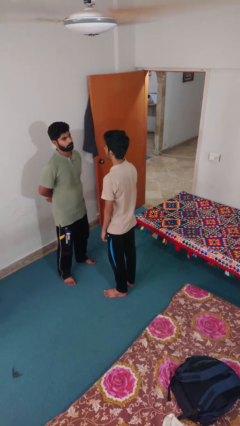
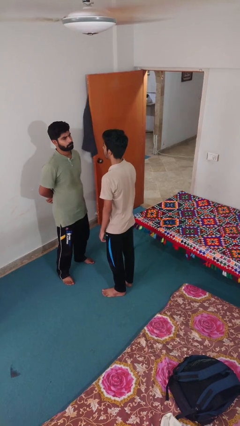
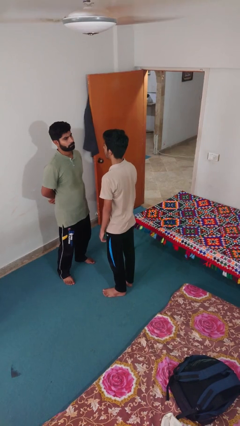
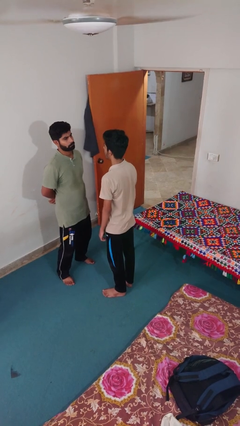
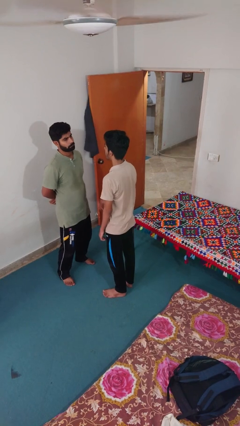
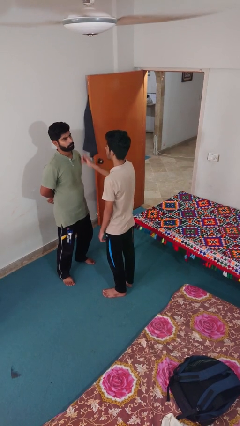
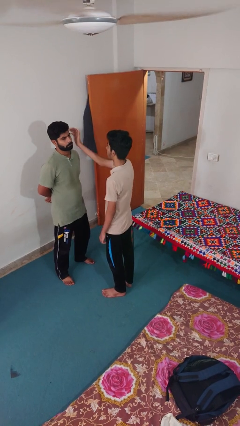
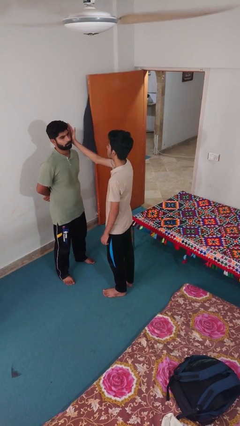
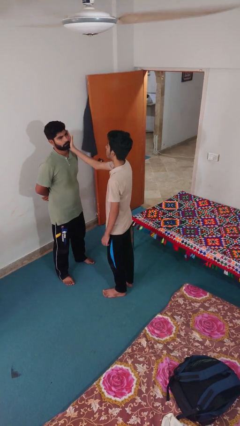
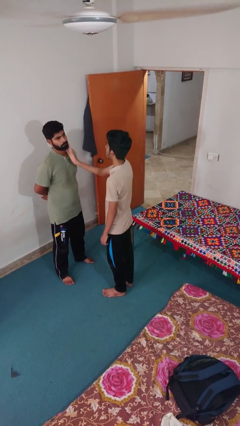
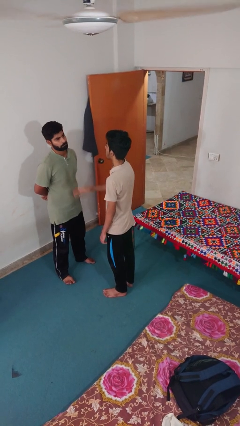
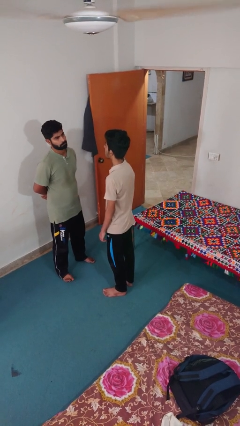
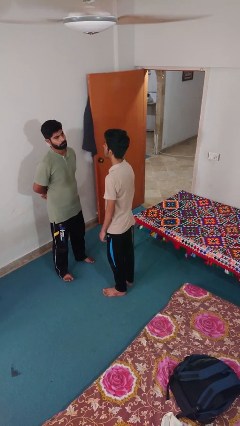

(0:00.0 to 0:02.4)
person touches face of person

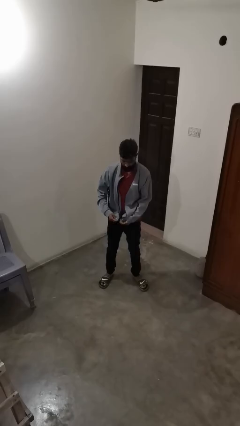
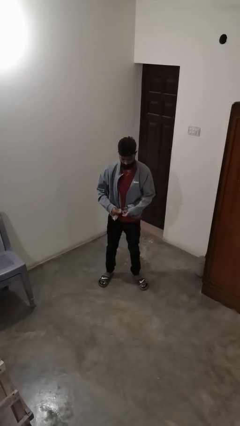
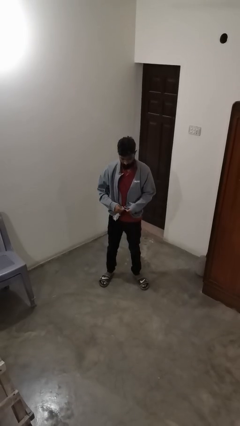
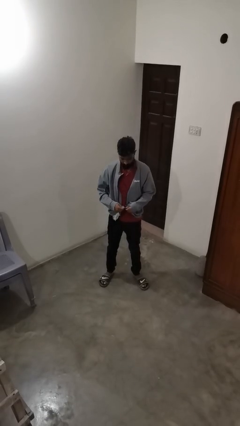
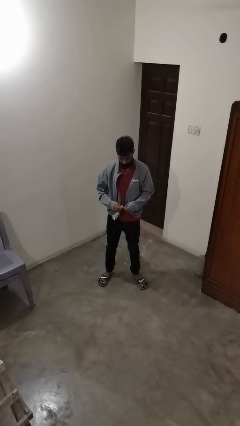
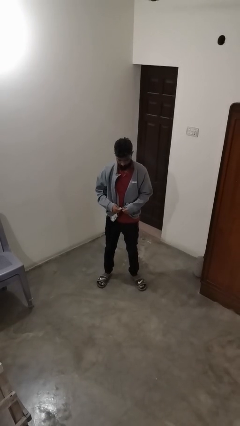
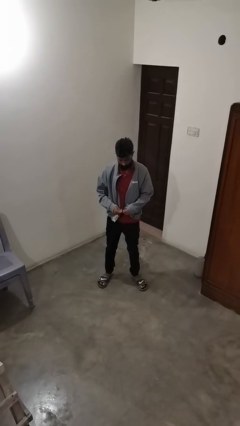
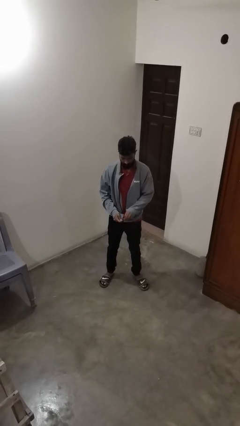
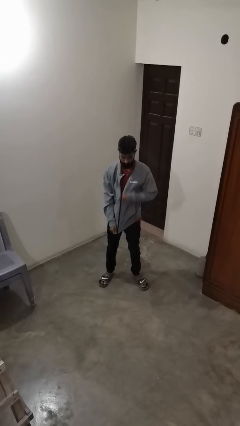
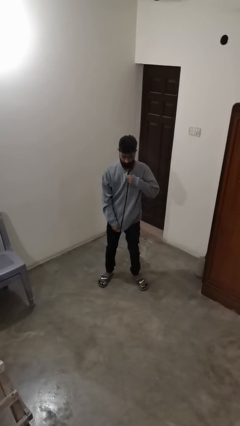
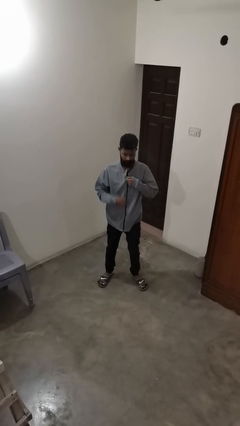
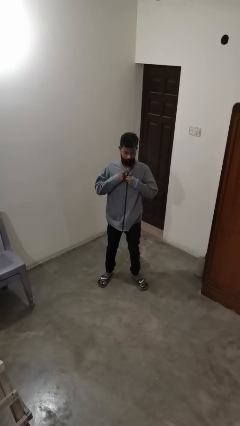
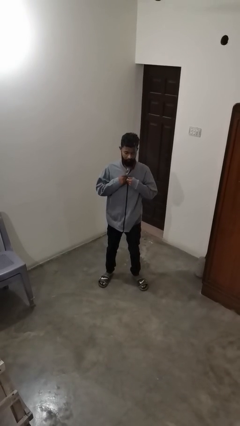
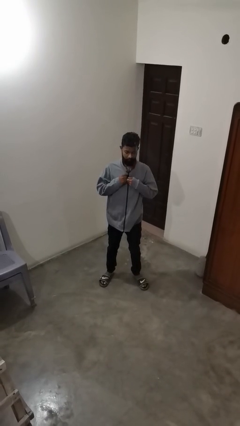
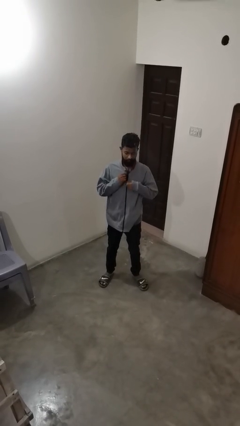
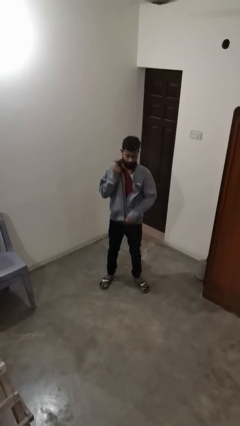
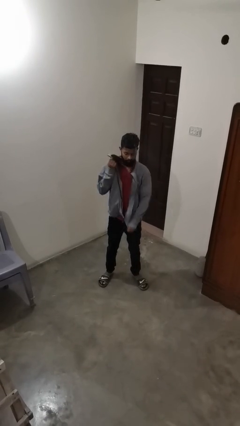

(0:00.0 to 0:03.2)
person zips up jacket

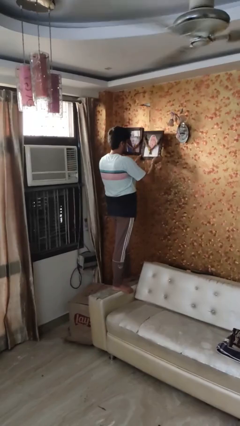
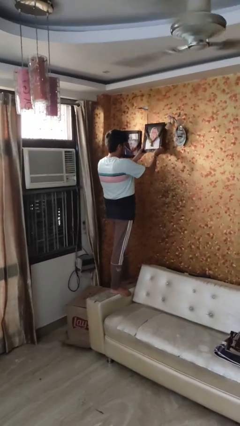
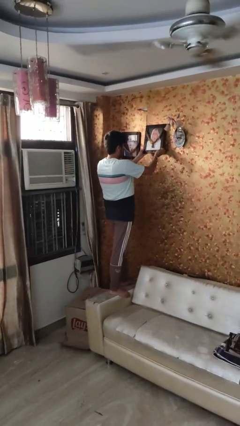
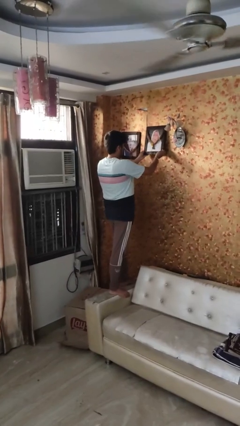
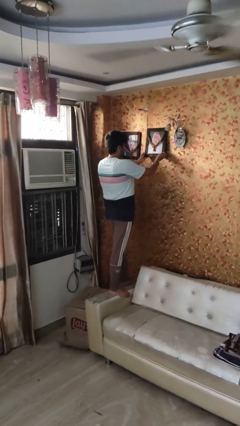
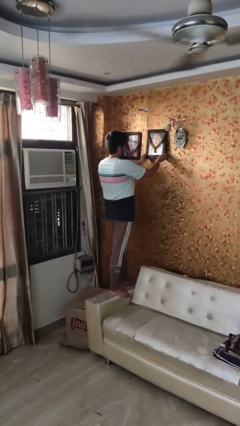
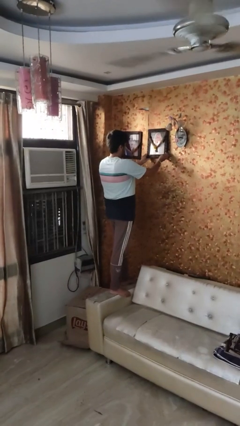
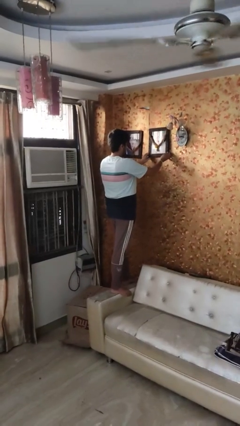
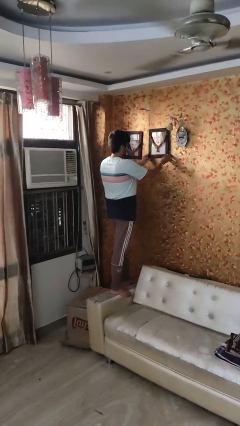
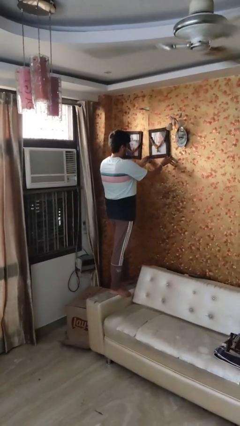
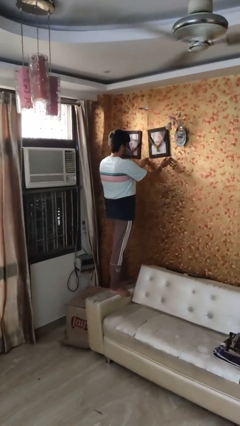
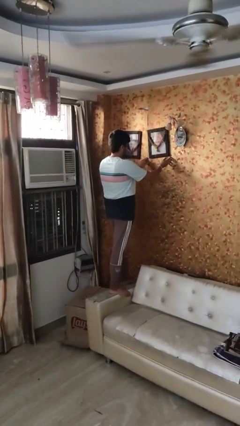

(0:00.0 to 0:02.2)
person puts up picture frame

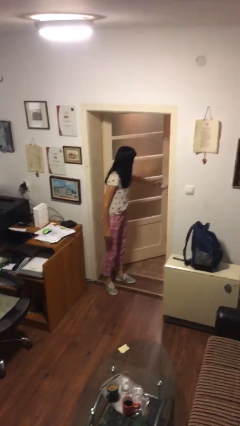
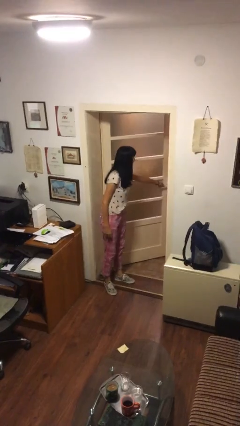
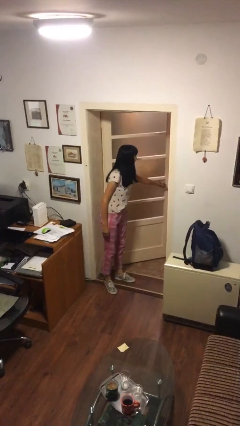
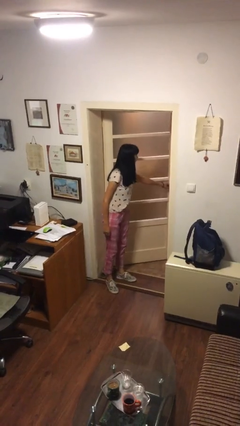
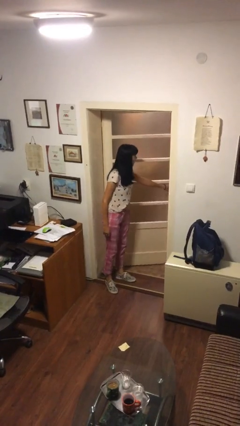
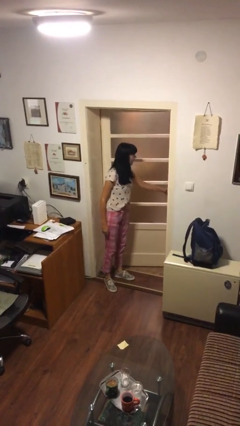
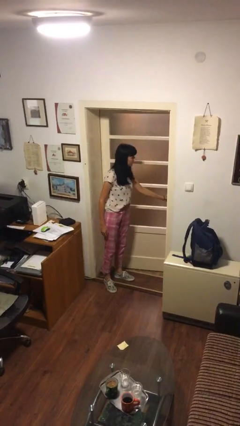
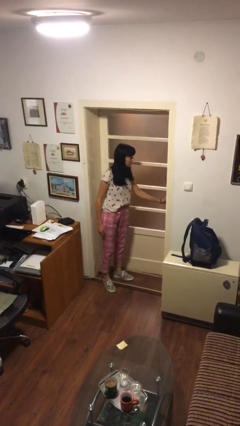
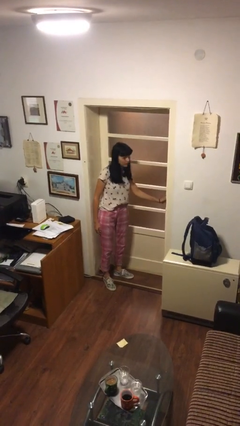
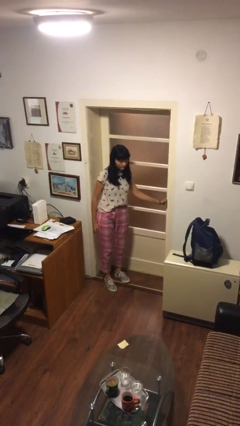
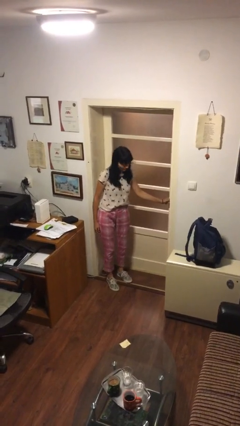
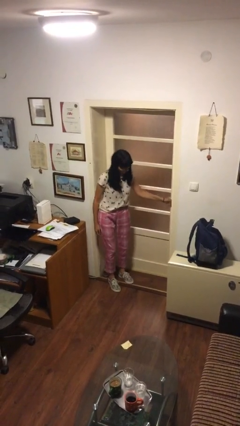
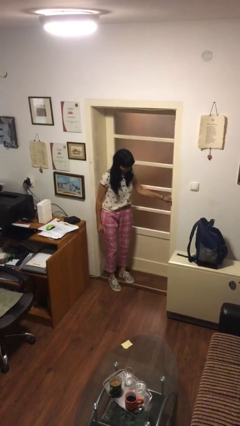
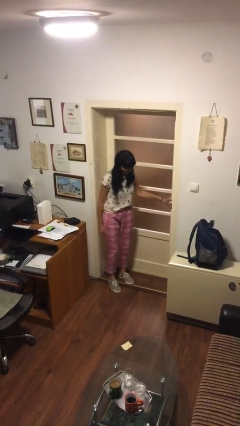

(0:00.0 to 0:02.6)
person closes facility door

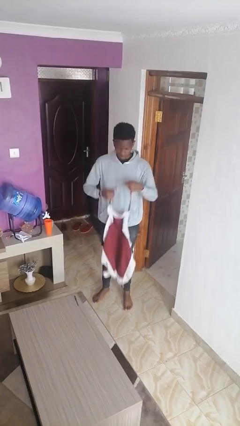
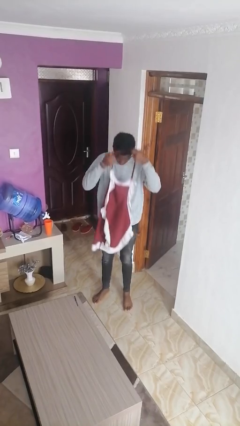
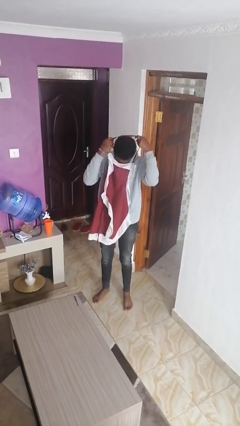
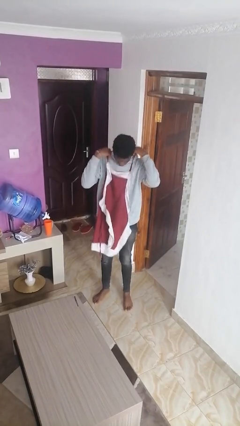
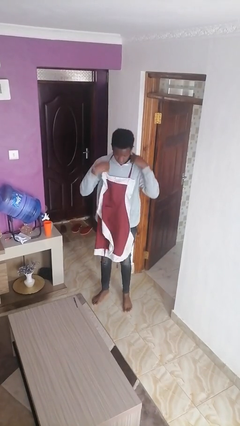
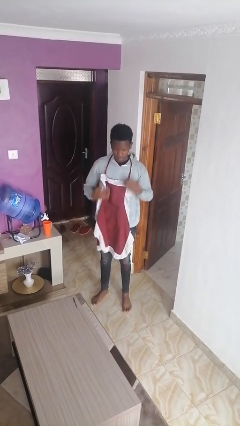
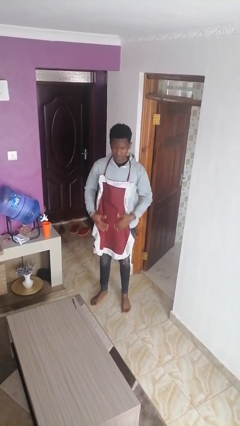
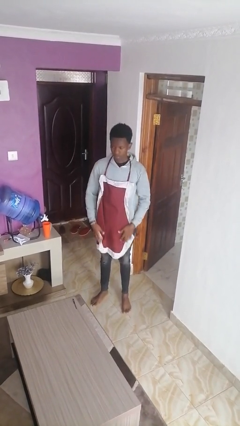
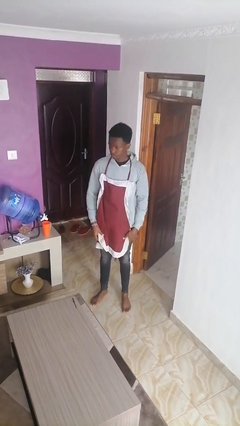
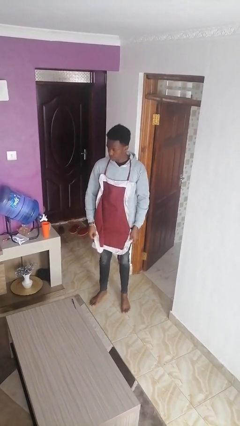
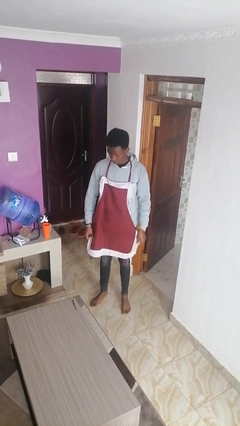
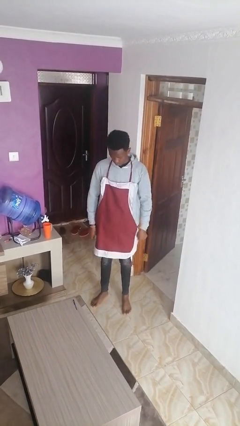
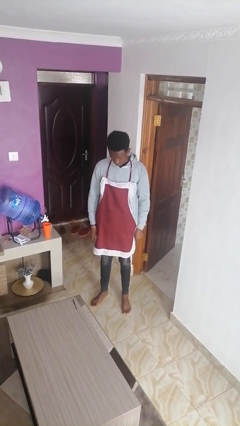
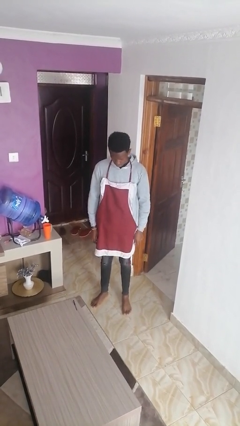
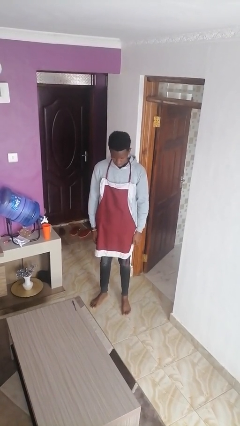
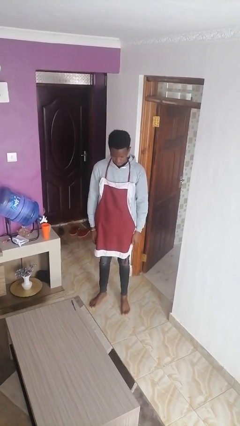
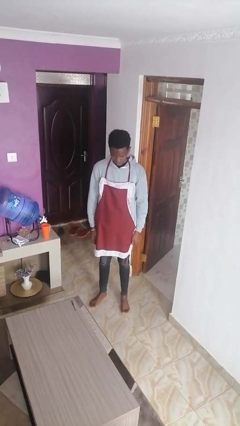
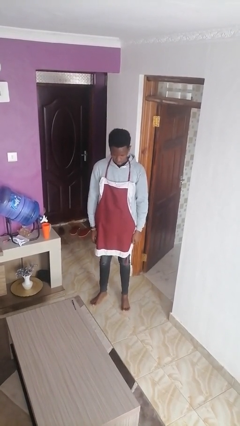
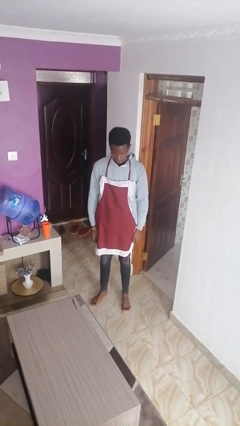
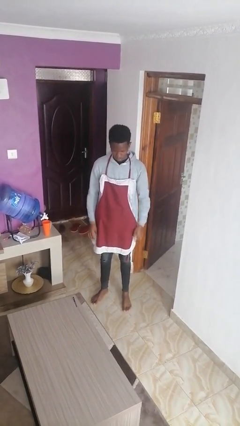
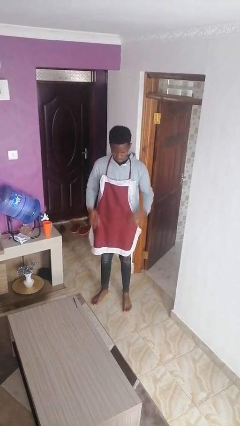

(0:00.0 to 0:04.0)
person puts on apron

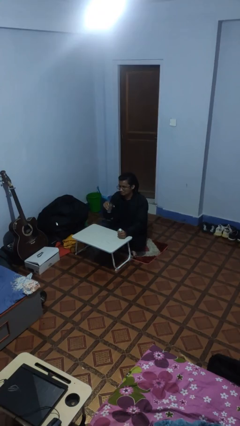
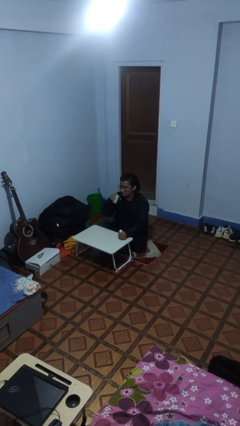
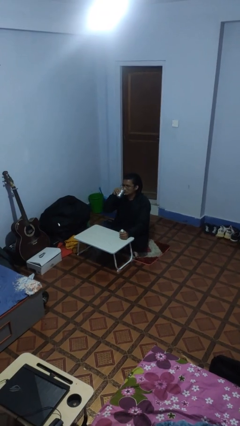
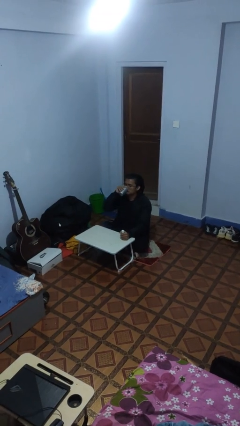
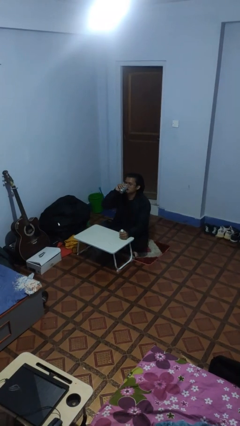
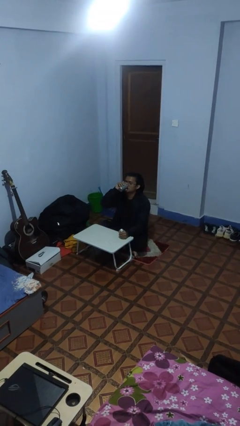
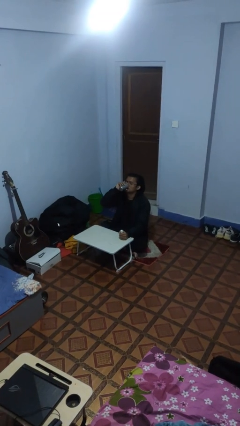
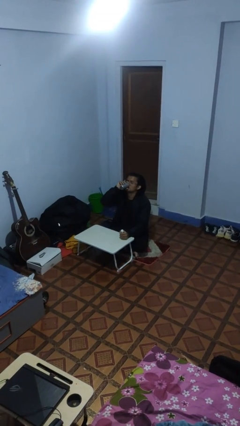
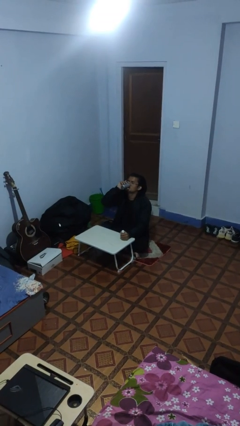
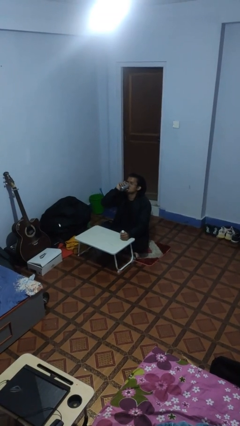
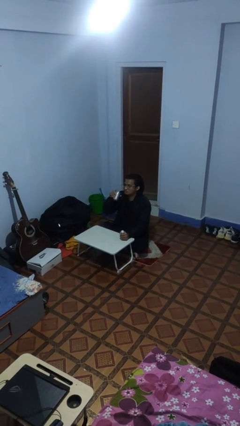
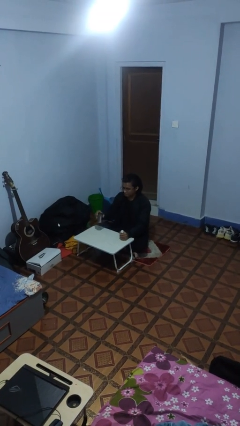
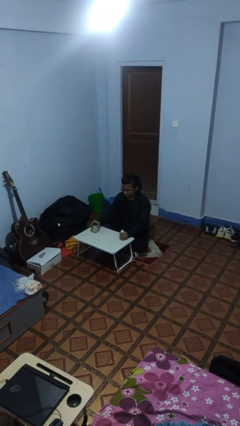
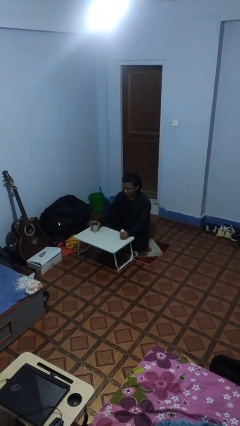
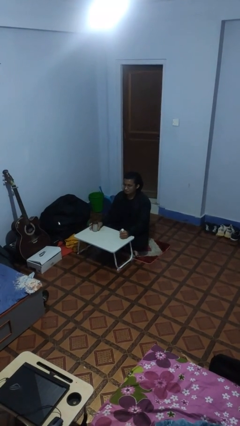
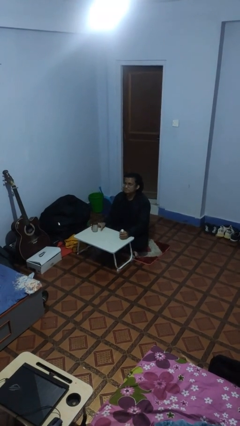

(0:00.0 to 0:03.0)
person drinks from cup
